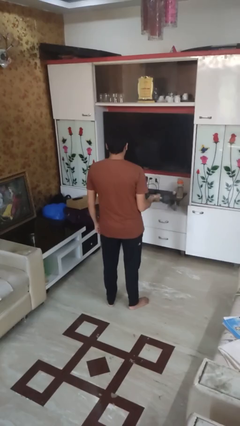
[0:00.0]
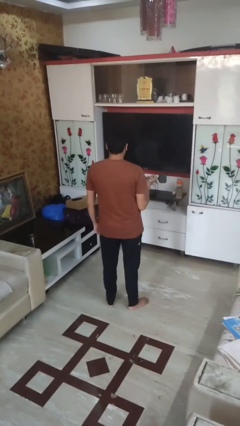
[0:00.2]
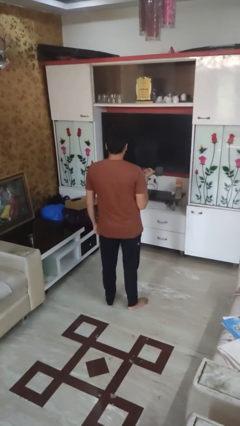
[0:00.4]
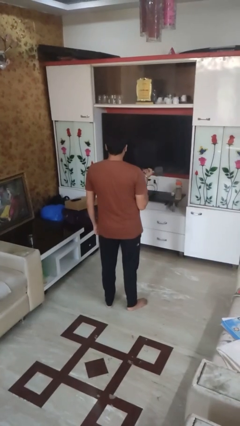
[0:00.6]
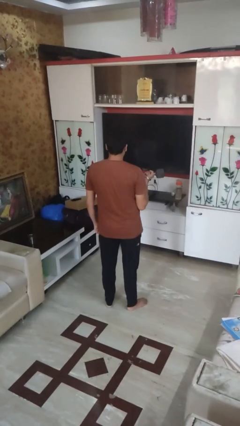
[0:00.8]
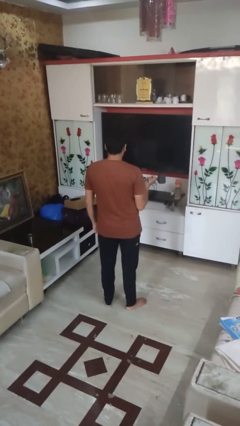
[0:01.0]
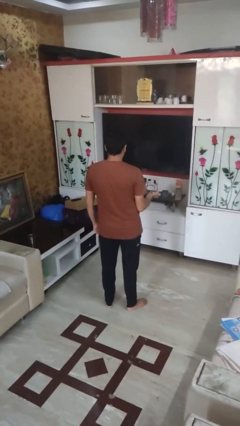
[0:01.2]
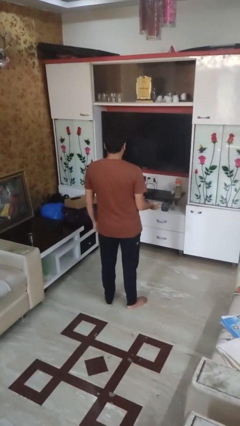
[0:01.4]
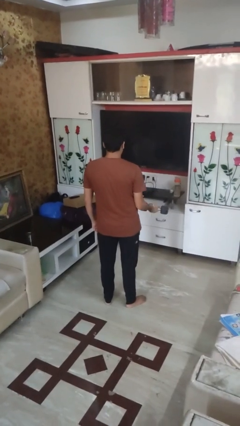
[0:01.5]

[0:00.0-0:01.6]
person lifts dumbbells

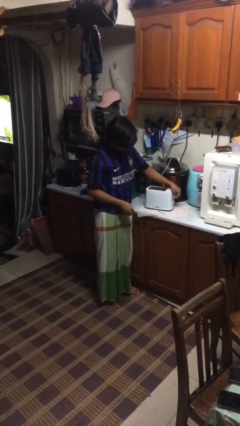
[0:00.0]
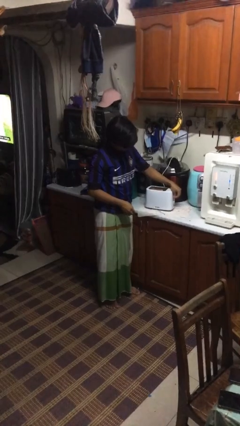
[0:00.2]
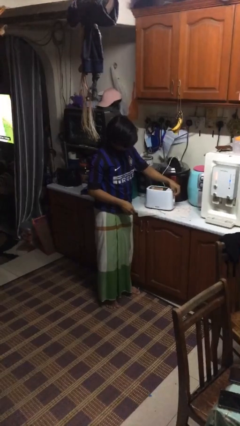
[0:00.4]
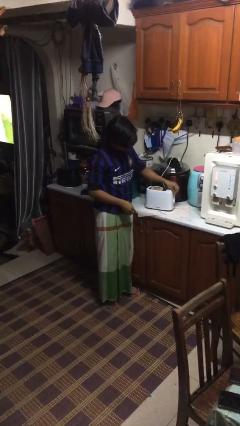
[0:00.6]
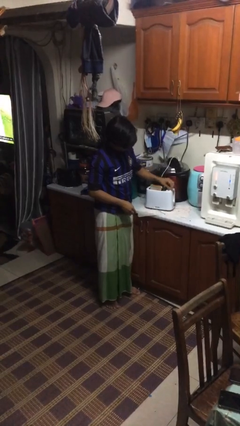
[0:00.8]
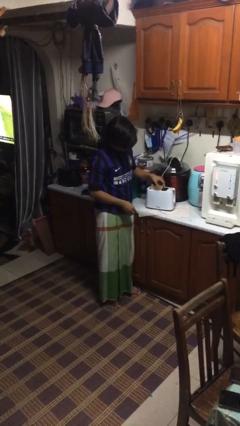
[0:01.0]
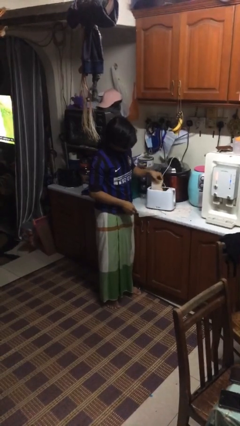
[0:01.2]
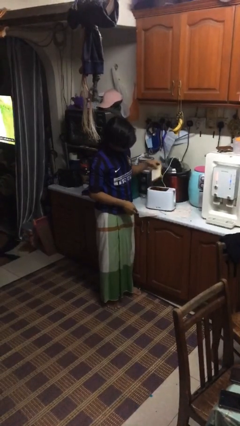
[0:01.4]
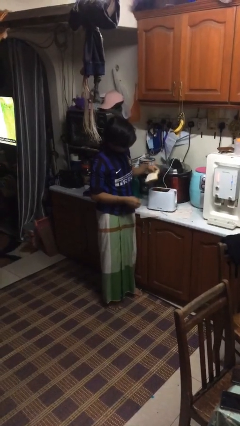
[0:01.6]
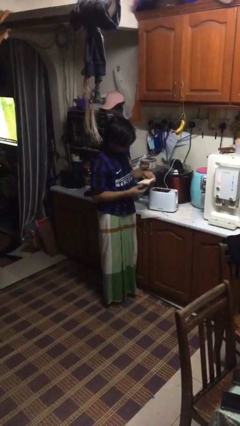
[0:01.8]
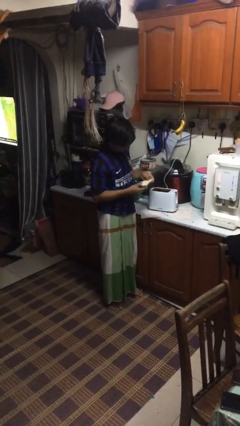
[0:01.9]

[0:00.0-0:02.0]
person takes object from toaster

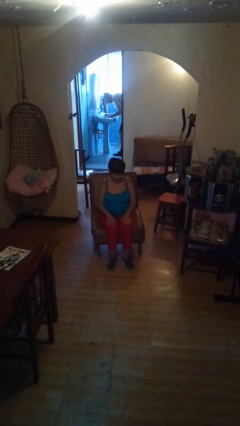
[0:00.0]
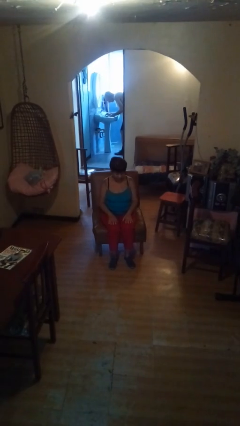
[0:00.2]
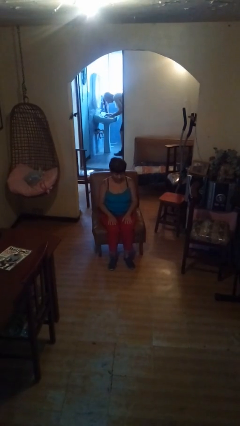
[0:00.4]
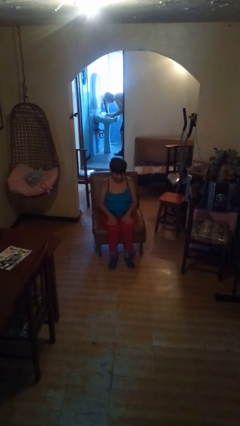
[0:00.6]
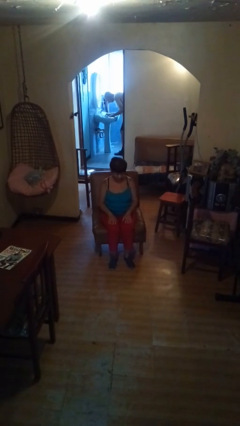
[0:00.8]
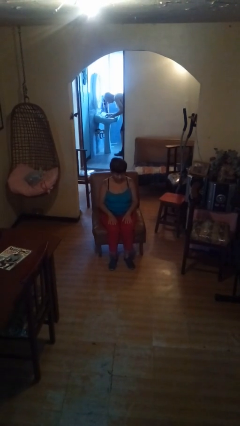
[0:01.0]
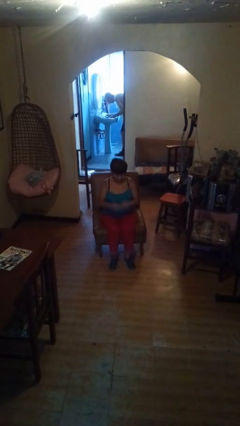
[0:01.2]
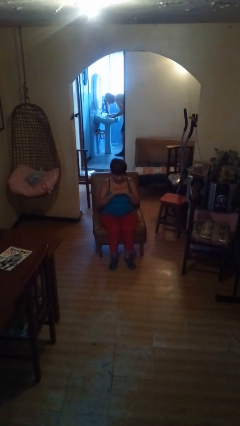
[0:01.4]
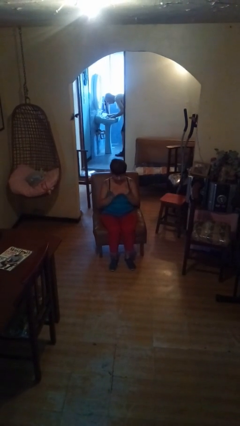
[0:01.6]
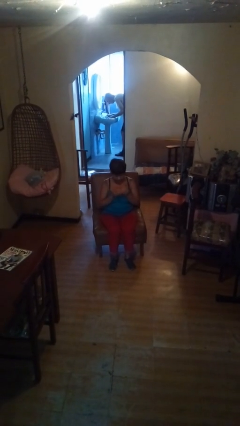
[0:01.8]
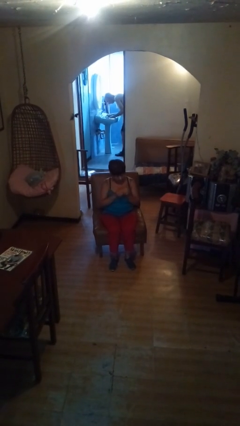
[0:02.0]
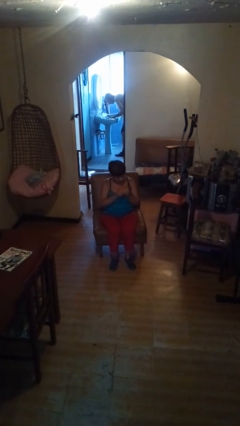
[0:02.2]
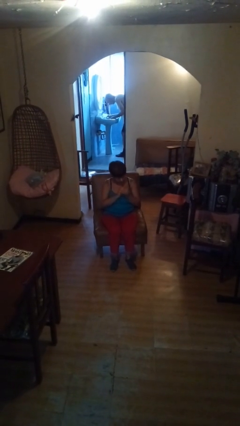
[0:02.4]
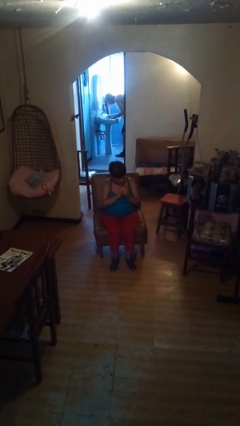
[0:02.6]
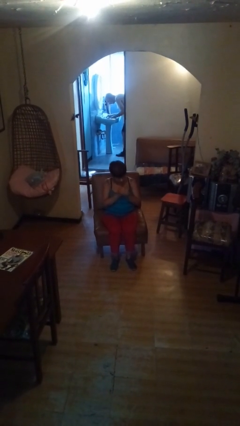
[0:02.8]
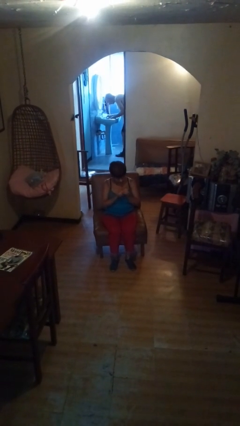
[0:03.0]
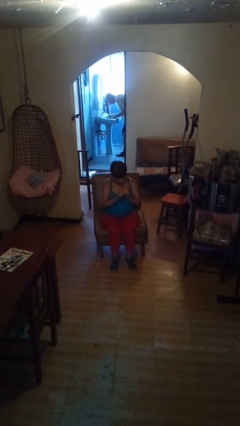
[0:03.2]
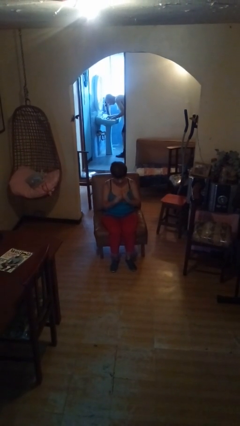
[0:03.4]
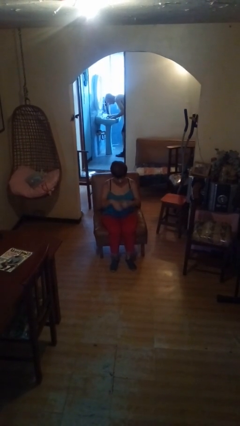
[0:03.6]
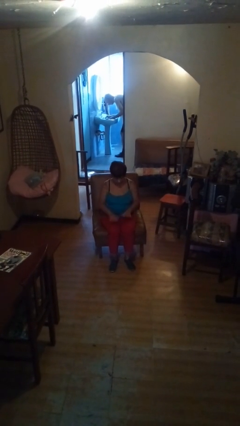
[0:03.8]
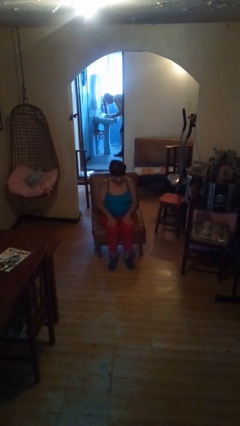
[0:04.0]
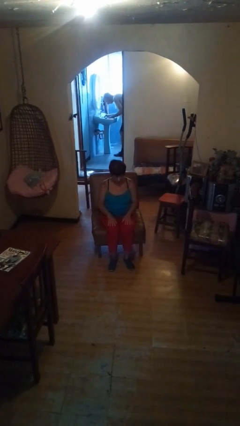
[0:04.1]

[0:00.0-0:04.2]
person looks at hands in lap

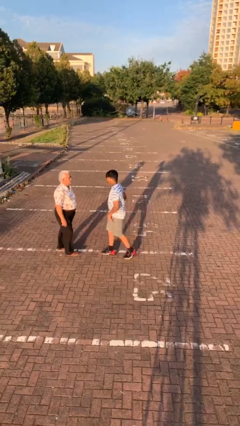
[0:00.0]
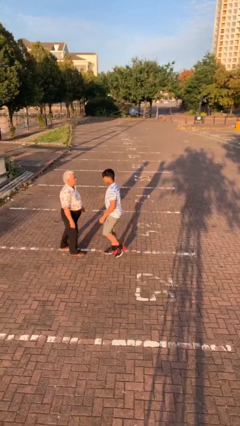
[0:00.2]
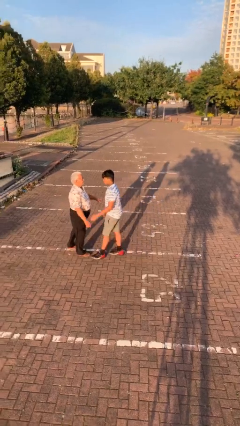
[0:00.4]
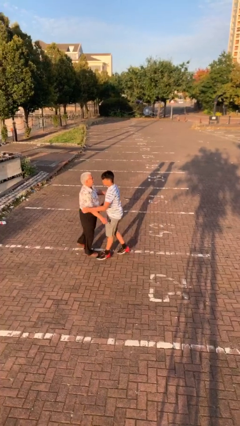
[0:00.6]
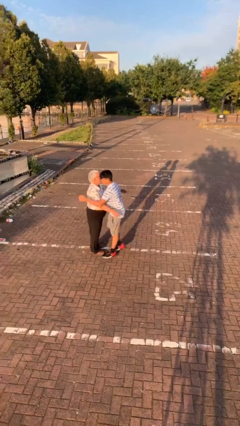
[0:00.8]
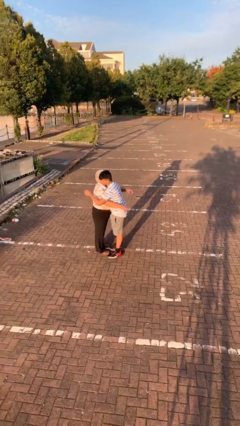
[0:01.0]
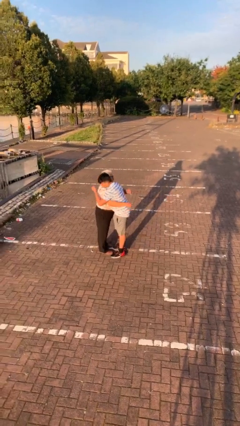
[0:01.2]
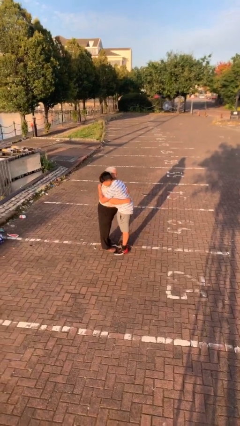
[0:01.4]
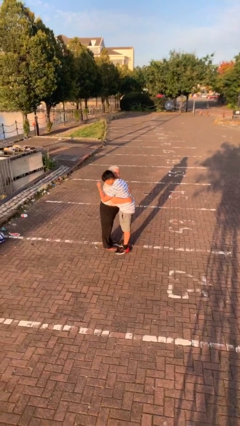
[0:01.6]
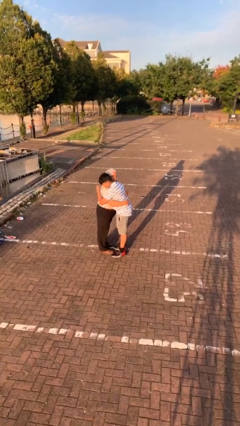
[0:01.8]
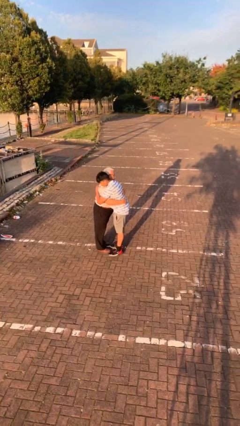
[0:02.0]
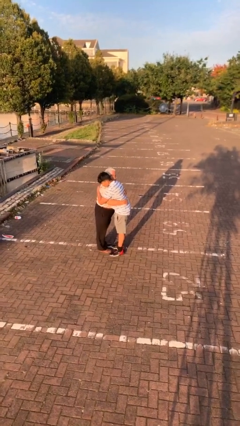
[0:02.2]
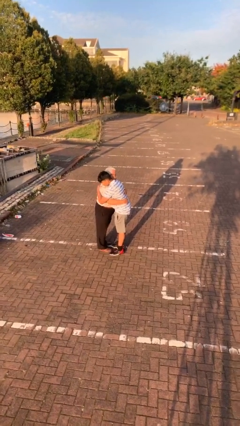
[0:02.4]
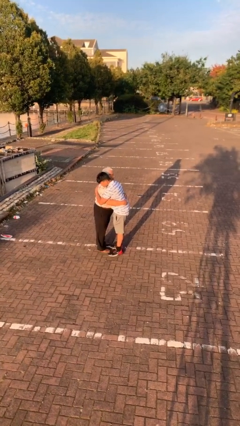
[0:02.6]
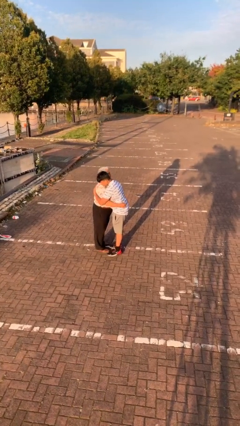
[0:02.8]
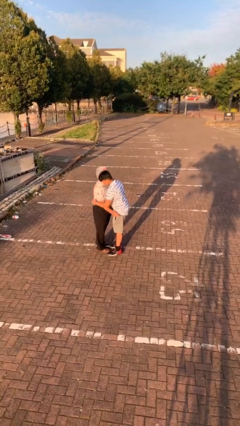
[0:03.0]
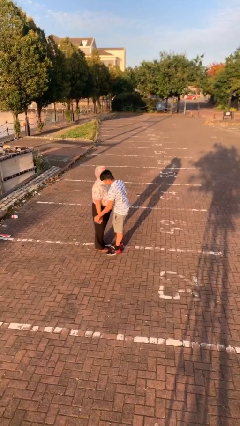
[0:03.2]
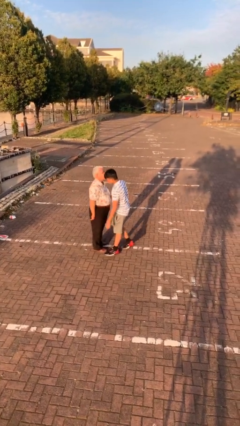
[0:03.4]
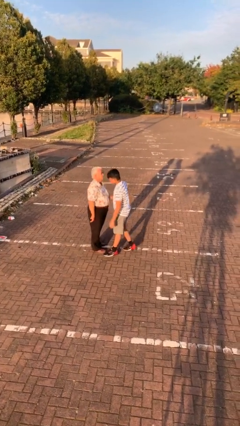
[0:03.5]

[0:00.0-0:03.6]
person embraces person

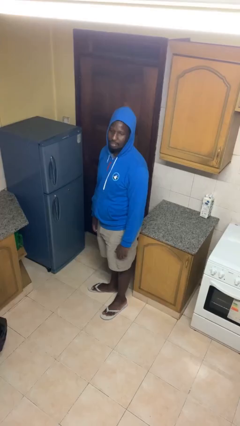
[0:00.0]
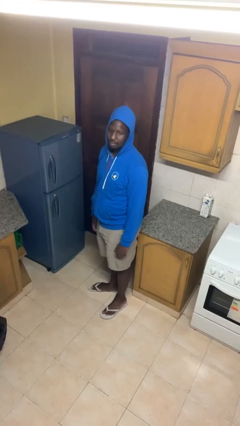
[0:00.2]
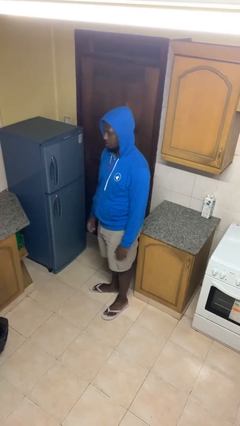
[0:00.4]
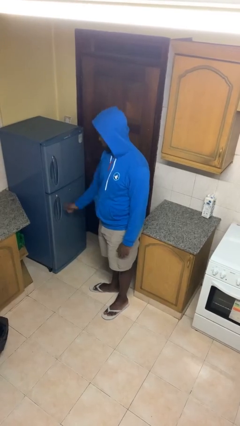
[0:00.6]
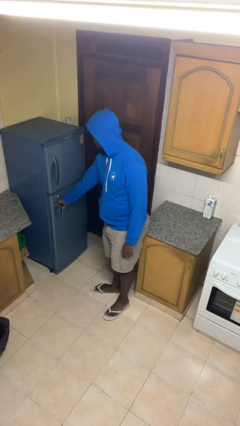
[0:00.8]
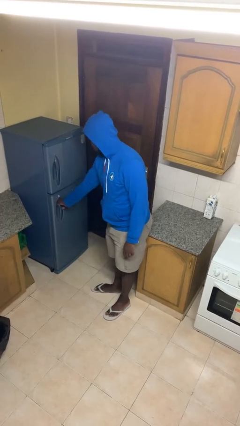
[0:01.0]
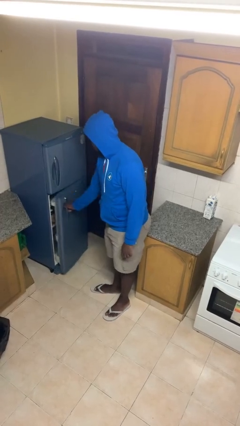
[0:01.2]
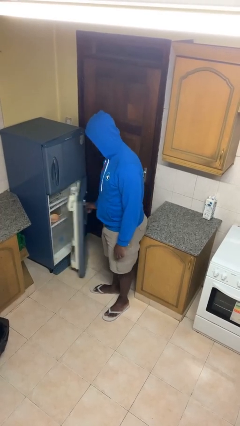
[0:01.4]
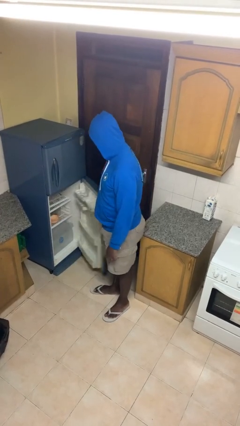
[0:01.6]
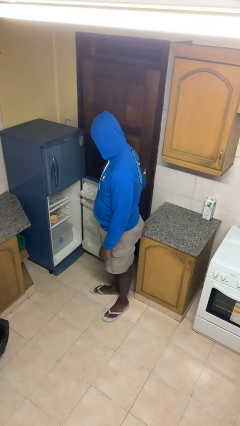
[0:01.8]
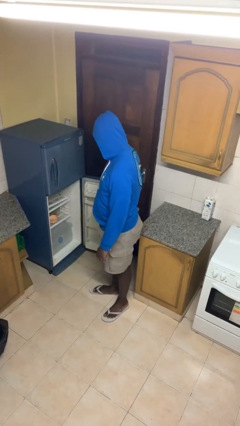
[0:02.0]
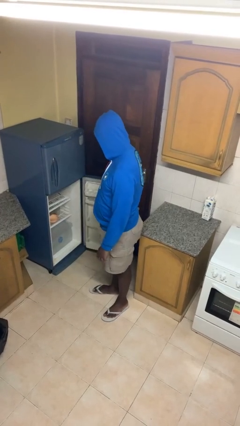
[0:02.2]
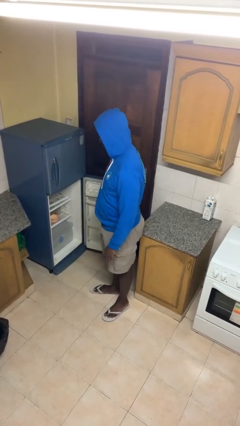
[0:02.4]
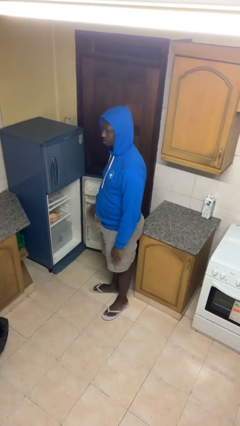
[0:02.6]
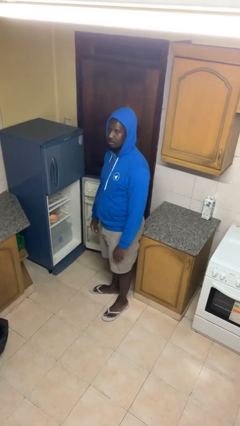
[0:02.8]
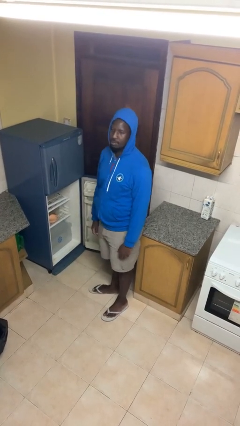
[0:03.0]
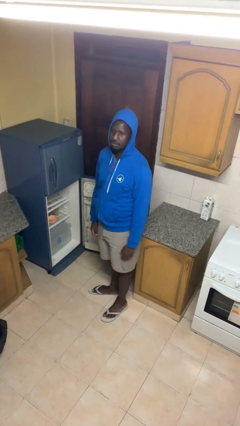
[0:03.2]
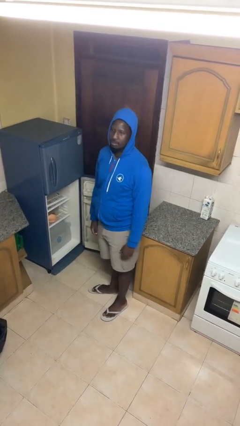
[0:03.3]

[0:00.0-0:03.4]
person opens refrigerator

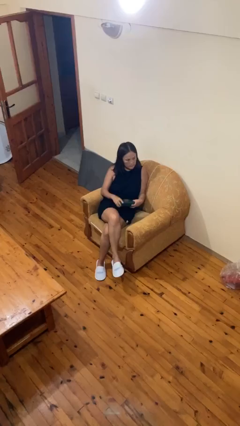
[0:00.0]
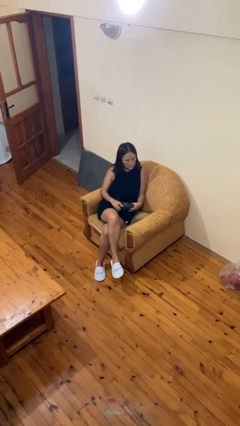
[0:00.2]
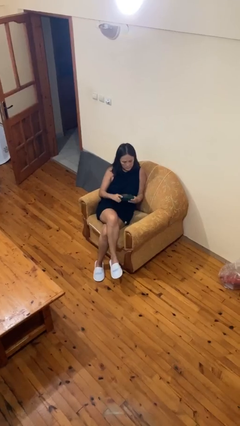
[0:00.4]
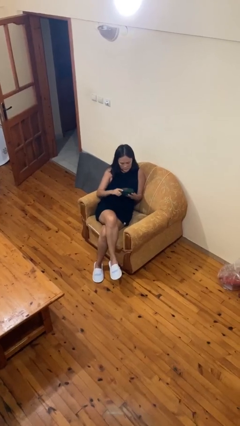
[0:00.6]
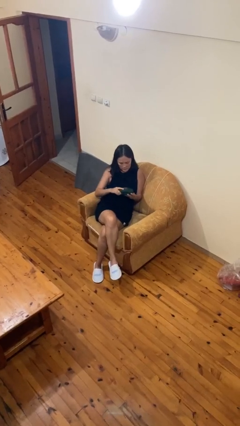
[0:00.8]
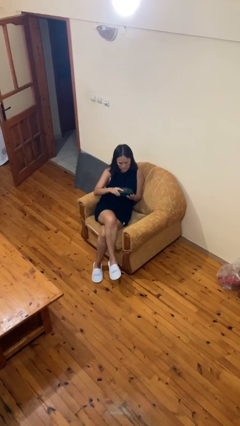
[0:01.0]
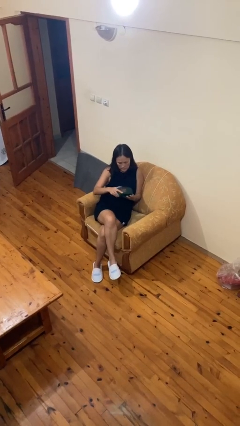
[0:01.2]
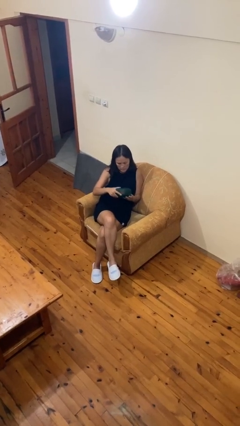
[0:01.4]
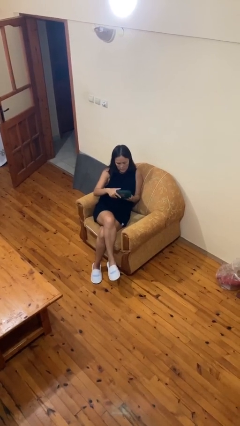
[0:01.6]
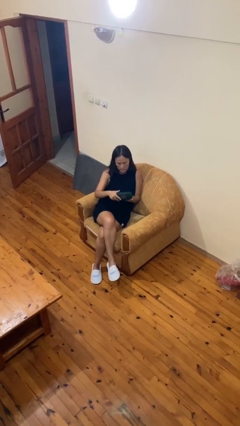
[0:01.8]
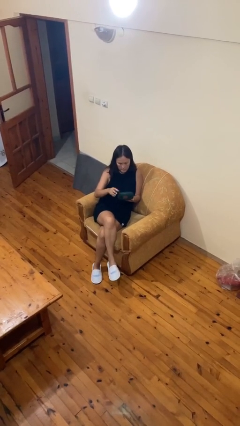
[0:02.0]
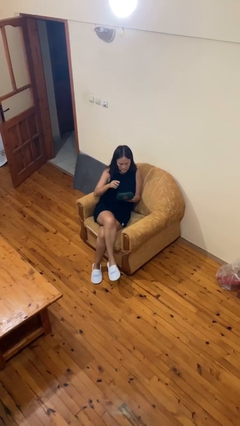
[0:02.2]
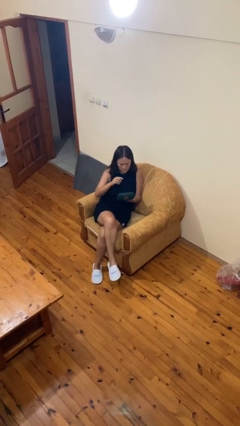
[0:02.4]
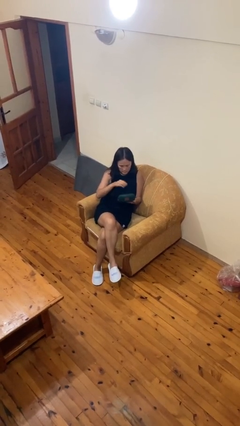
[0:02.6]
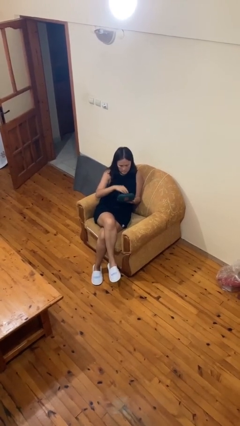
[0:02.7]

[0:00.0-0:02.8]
person opens jewelry box
